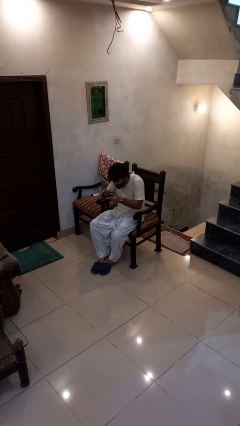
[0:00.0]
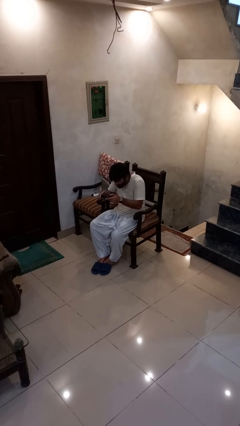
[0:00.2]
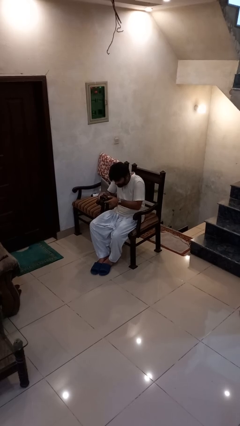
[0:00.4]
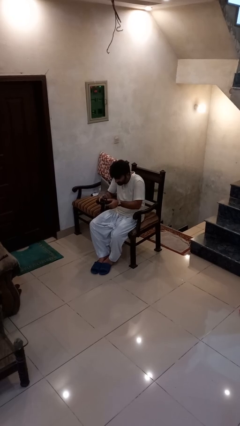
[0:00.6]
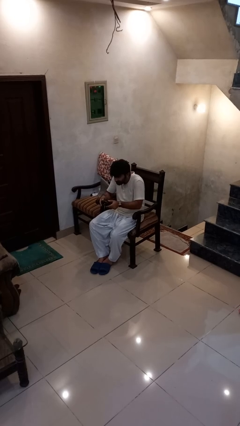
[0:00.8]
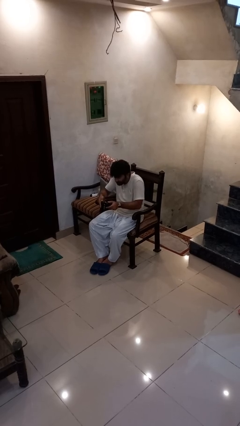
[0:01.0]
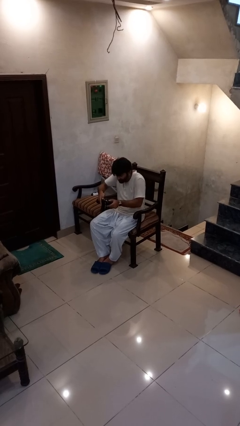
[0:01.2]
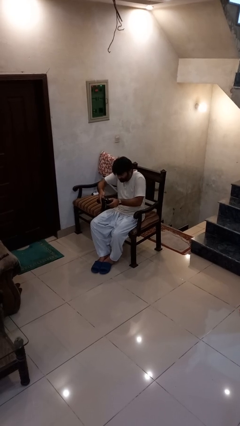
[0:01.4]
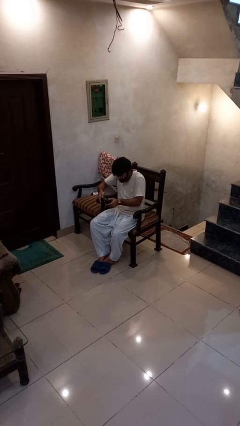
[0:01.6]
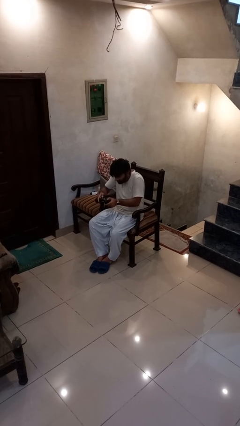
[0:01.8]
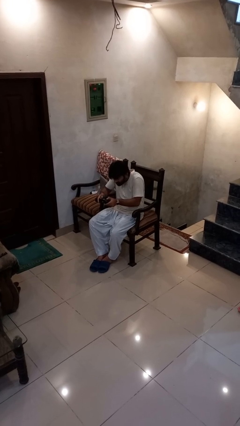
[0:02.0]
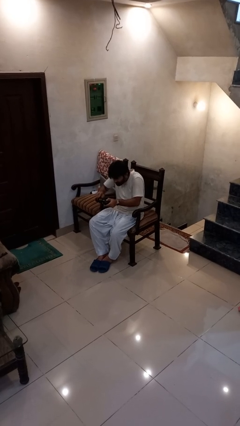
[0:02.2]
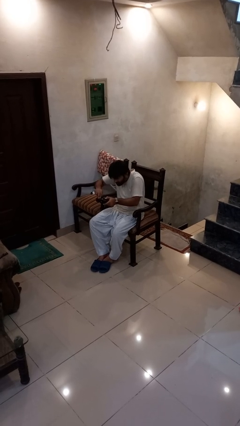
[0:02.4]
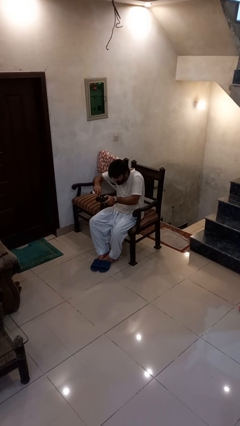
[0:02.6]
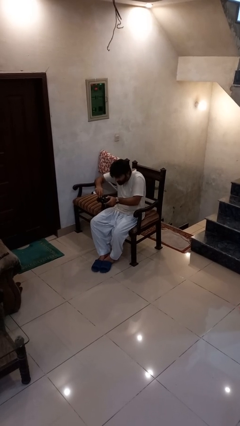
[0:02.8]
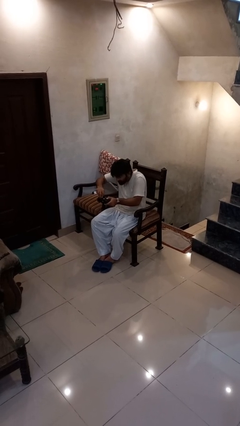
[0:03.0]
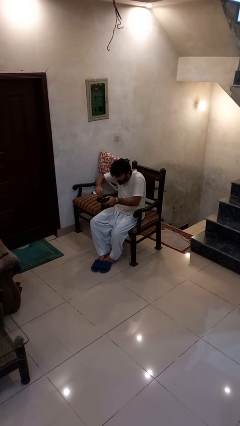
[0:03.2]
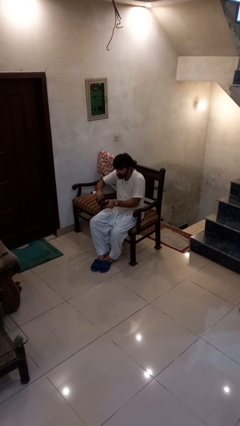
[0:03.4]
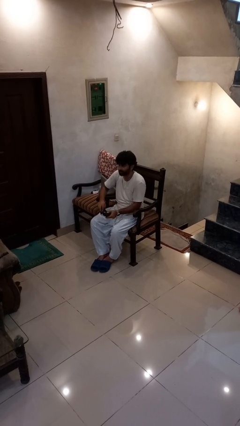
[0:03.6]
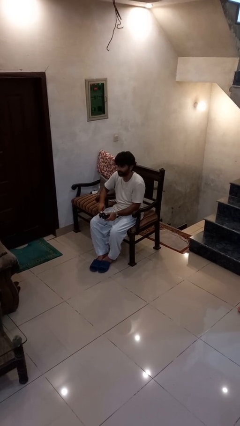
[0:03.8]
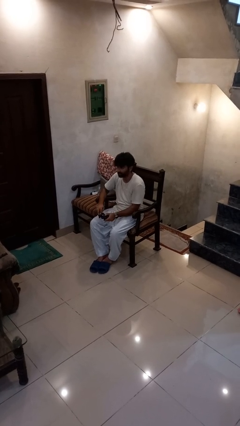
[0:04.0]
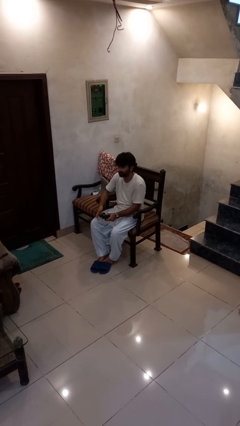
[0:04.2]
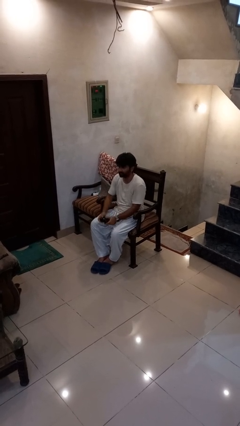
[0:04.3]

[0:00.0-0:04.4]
person interacts with handheld game

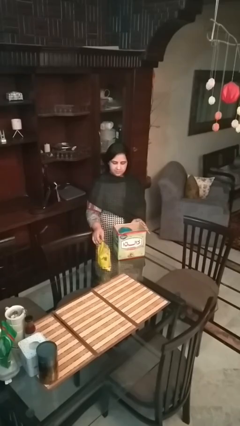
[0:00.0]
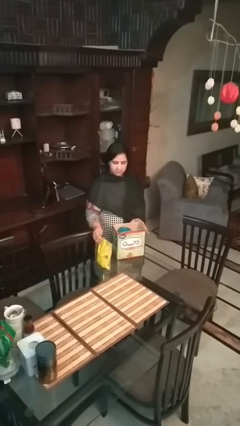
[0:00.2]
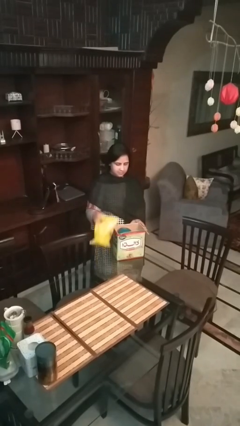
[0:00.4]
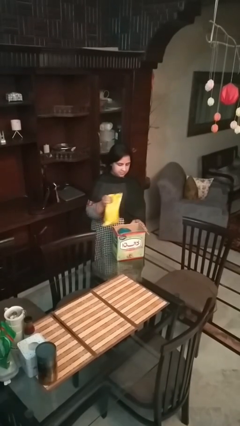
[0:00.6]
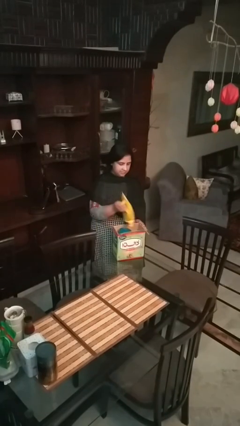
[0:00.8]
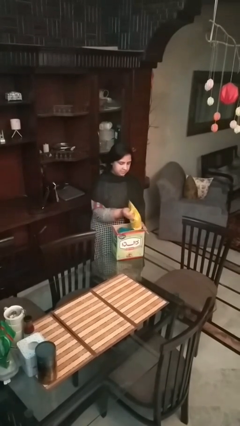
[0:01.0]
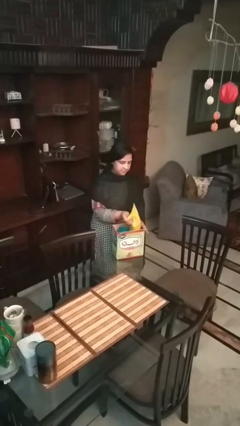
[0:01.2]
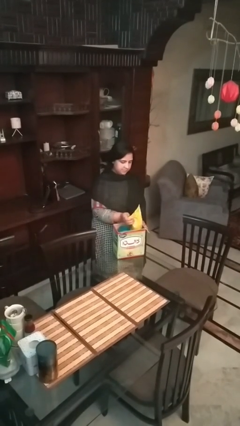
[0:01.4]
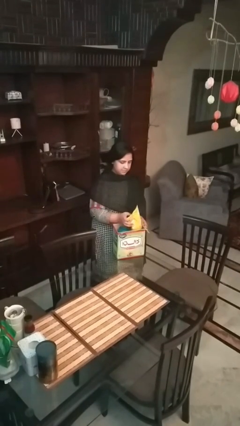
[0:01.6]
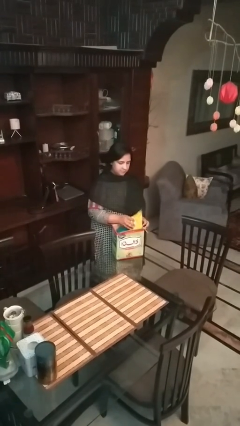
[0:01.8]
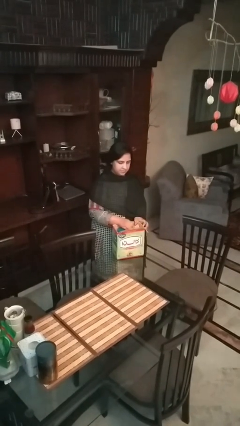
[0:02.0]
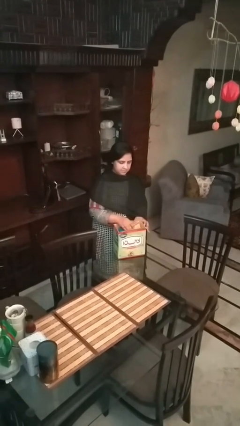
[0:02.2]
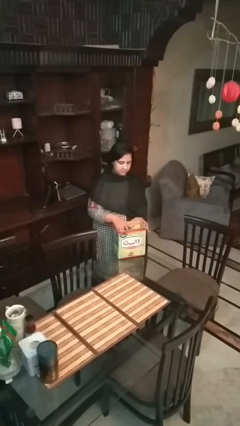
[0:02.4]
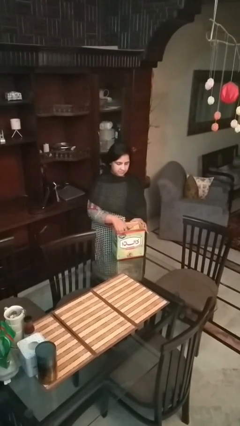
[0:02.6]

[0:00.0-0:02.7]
person puts object into box

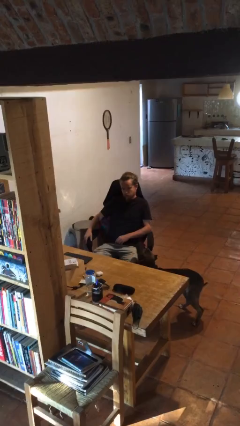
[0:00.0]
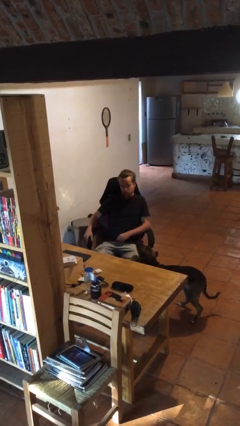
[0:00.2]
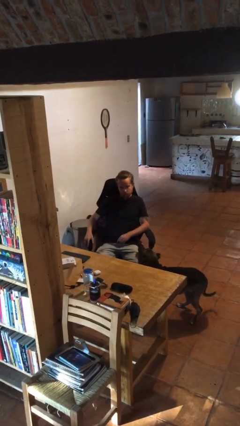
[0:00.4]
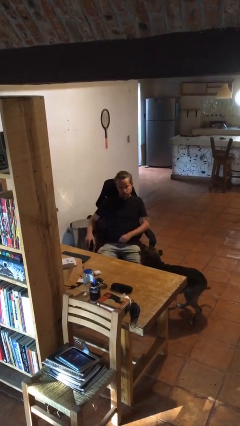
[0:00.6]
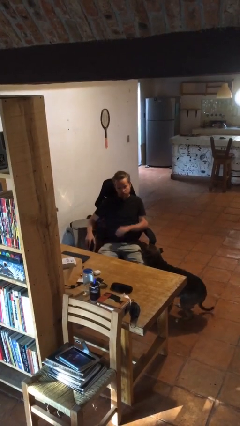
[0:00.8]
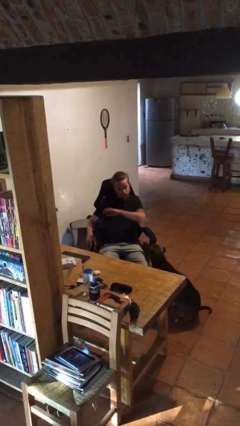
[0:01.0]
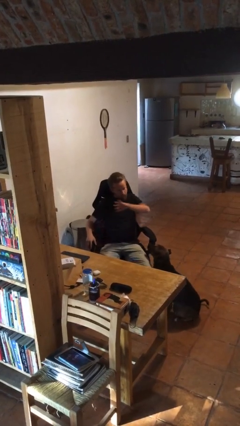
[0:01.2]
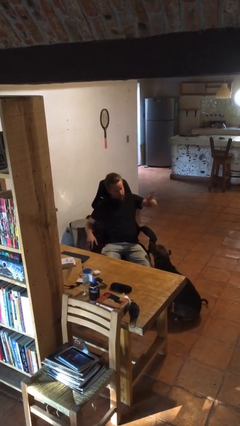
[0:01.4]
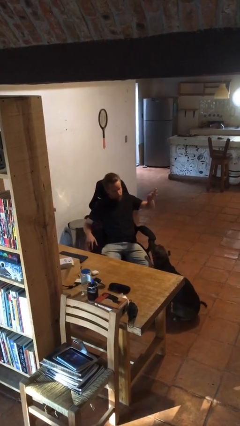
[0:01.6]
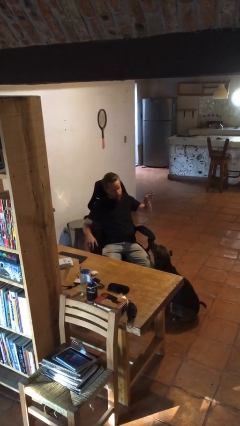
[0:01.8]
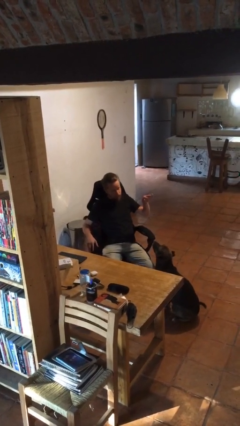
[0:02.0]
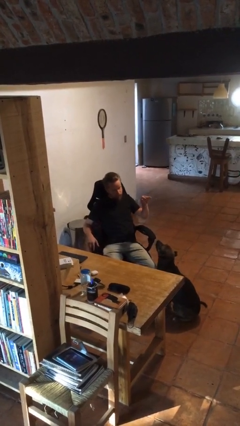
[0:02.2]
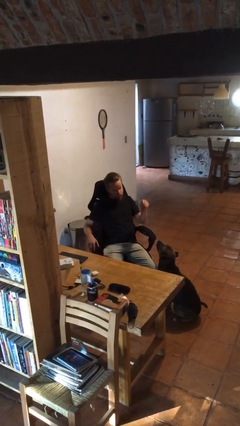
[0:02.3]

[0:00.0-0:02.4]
person gestures swipe left

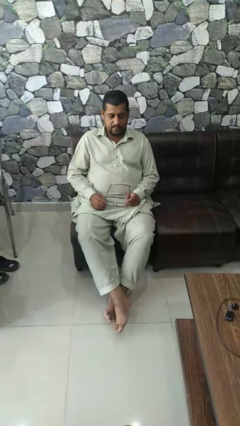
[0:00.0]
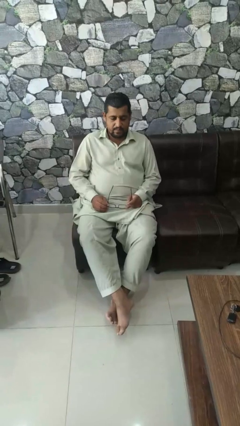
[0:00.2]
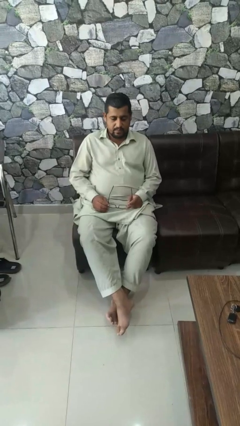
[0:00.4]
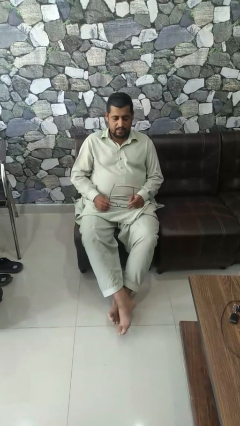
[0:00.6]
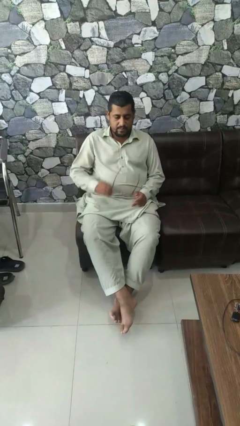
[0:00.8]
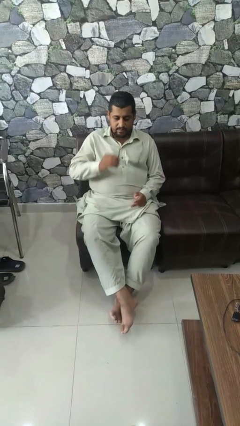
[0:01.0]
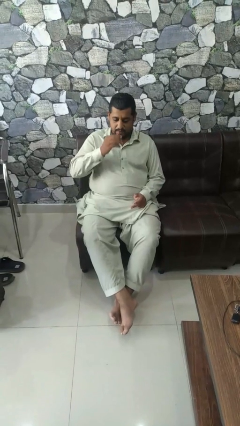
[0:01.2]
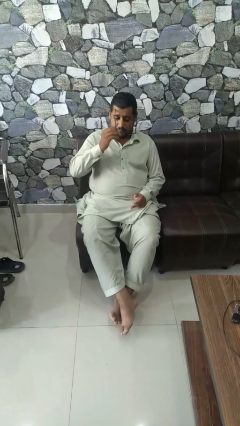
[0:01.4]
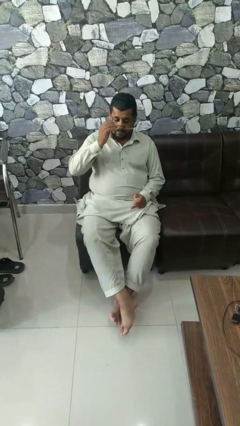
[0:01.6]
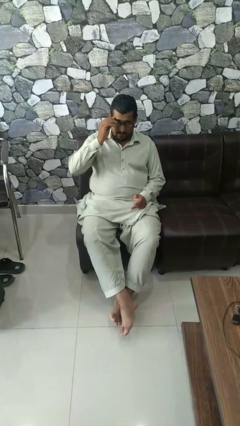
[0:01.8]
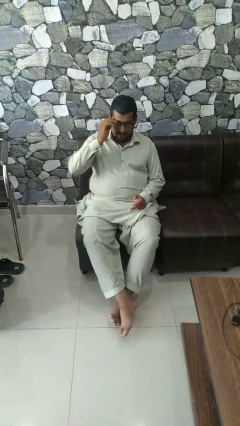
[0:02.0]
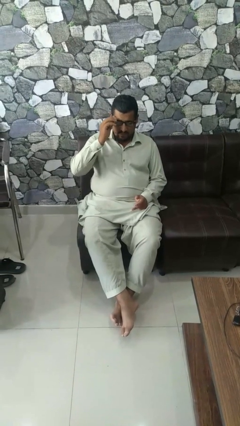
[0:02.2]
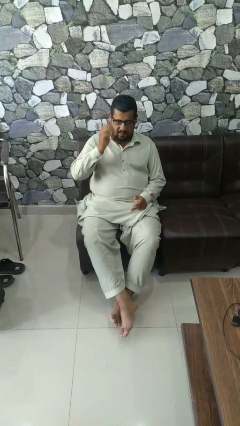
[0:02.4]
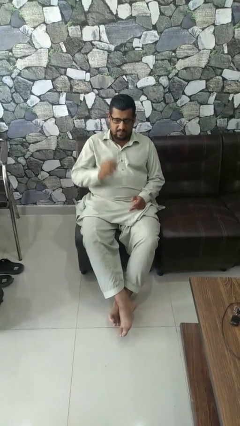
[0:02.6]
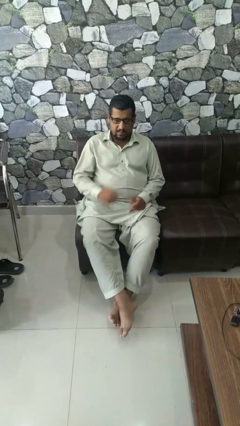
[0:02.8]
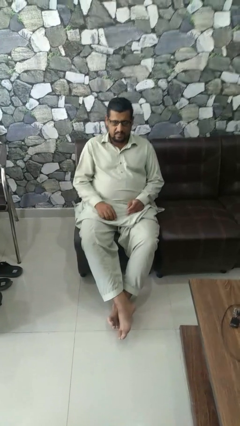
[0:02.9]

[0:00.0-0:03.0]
person puts on glasses

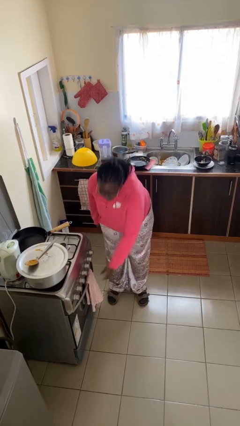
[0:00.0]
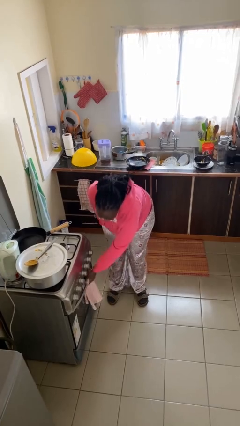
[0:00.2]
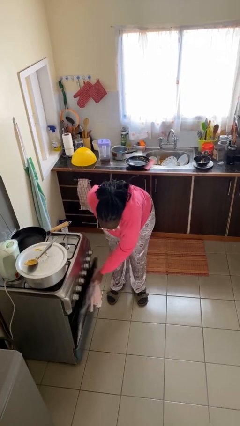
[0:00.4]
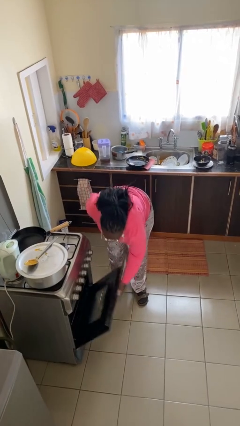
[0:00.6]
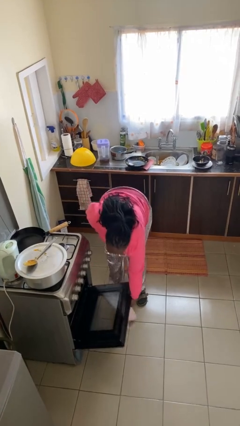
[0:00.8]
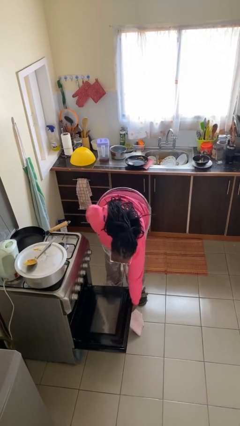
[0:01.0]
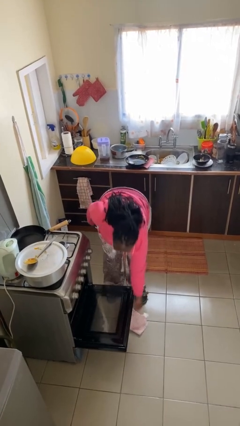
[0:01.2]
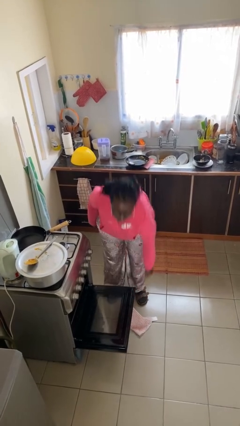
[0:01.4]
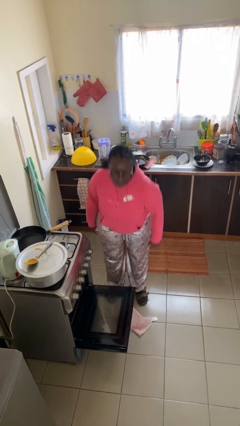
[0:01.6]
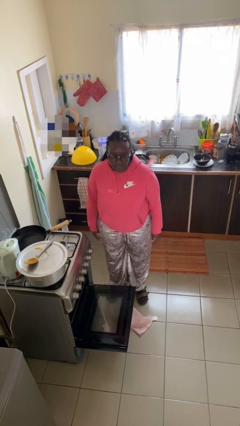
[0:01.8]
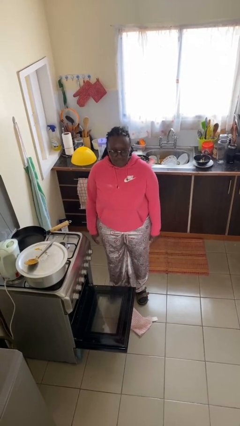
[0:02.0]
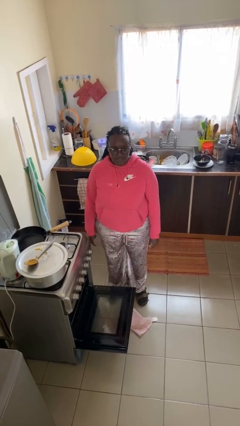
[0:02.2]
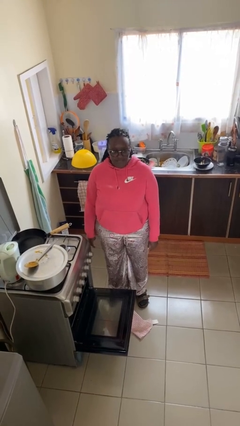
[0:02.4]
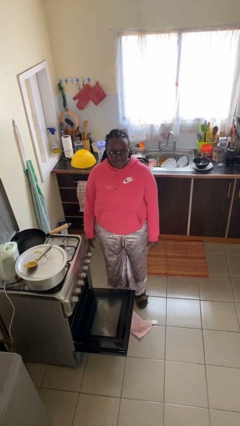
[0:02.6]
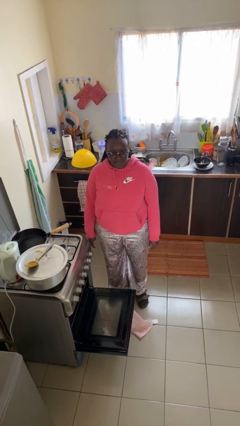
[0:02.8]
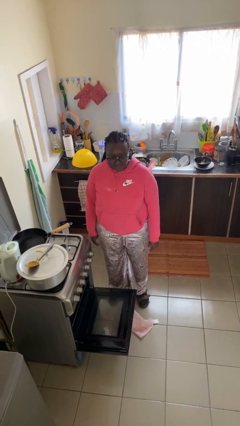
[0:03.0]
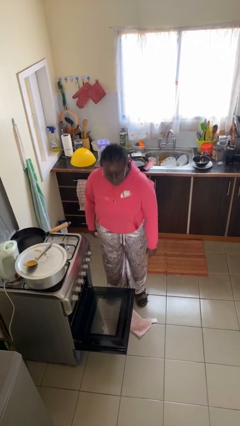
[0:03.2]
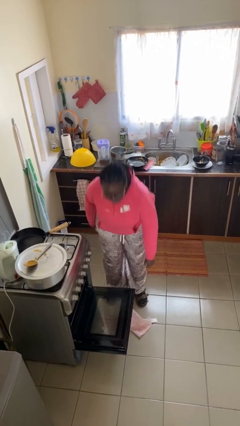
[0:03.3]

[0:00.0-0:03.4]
person opens oven door

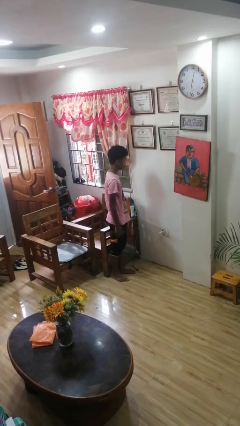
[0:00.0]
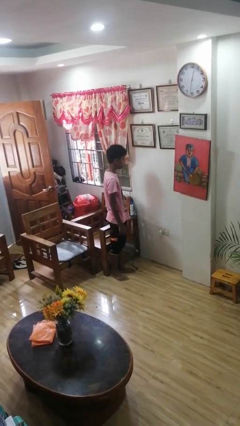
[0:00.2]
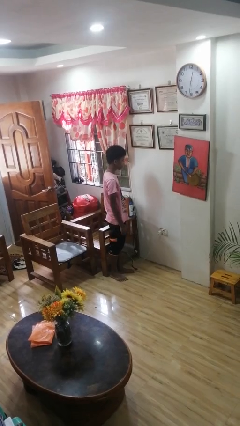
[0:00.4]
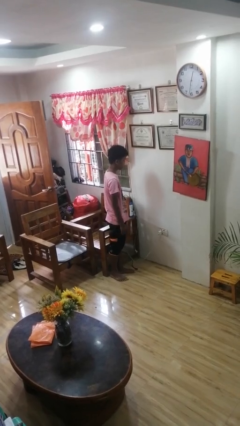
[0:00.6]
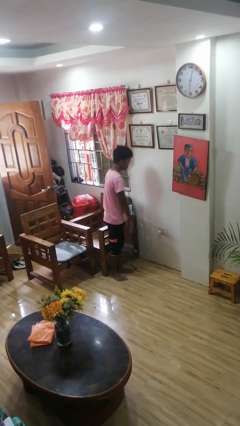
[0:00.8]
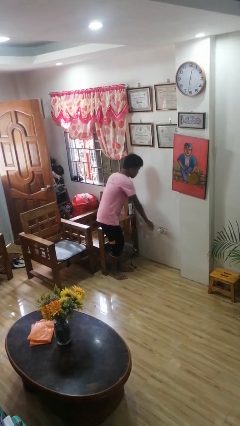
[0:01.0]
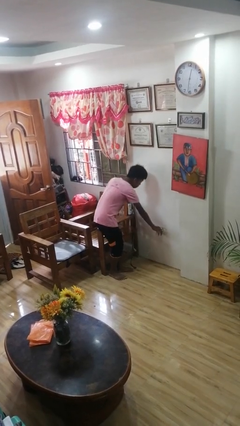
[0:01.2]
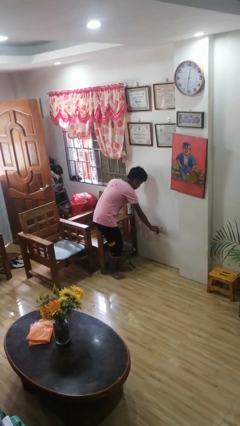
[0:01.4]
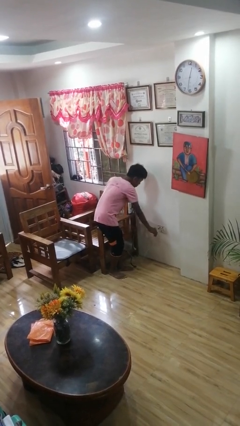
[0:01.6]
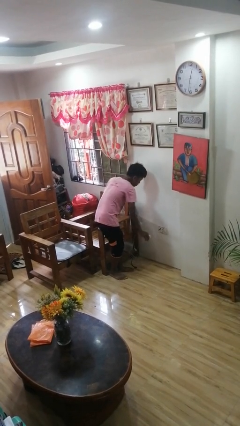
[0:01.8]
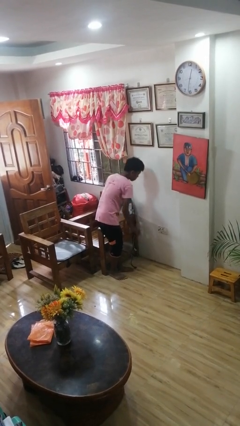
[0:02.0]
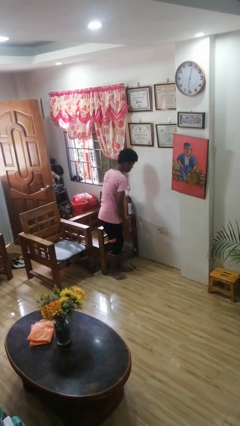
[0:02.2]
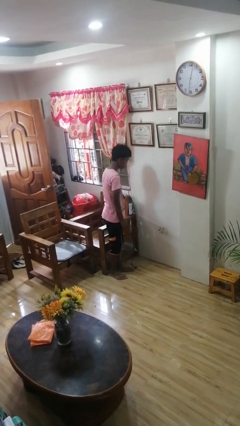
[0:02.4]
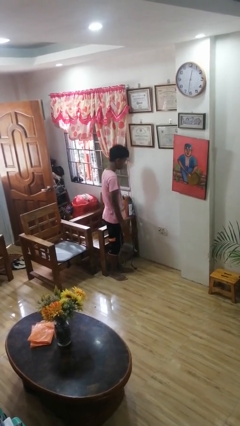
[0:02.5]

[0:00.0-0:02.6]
person unplugs from electrical socket
